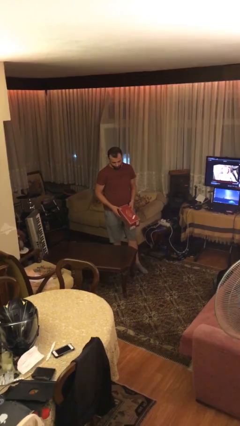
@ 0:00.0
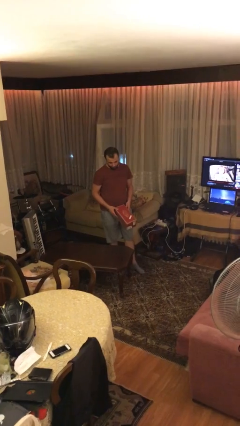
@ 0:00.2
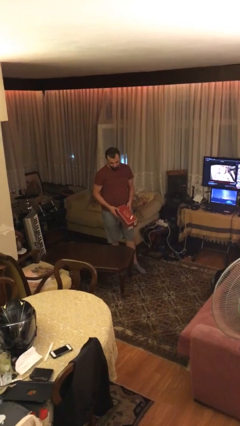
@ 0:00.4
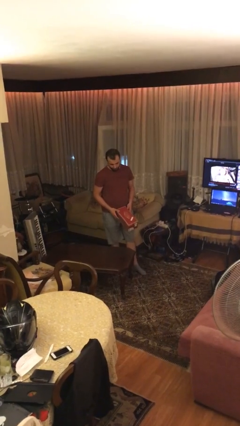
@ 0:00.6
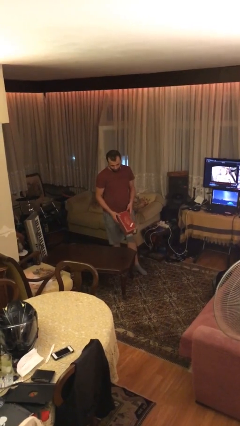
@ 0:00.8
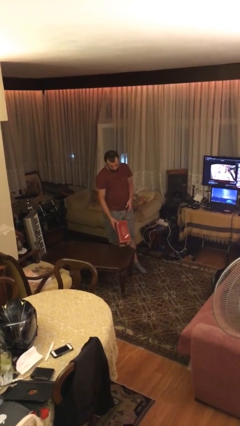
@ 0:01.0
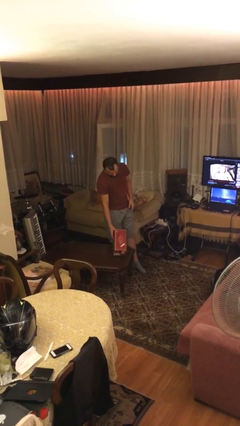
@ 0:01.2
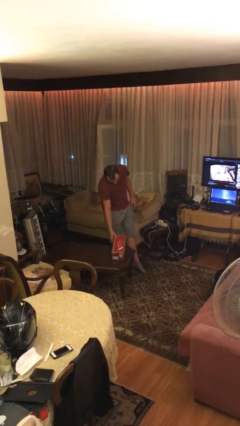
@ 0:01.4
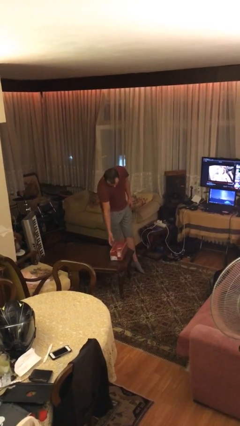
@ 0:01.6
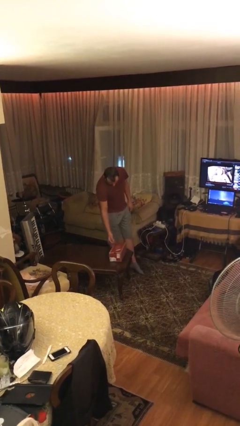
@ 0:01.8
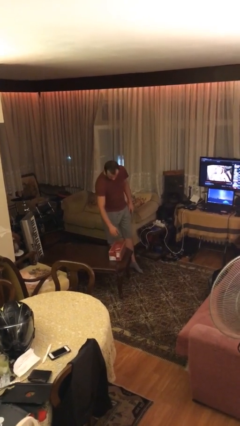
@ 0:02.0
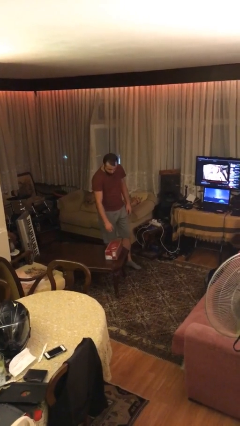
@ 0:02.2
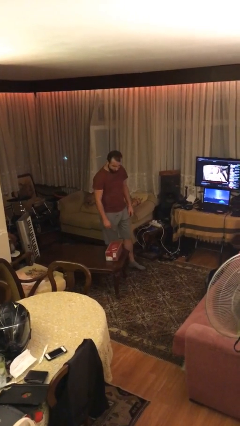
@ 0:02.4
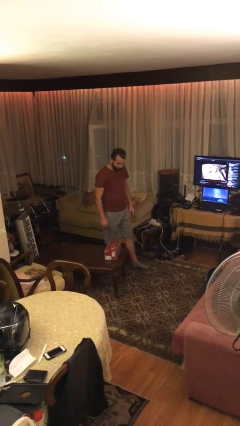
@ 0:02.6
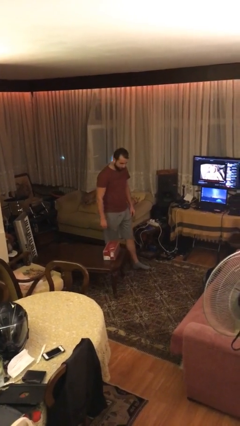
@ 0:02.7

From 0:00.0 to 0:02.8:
person puts down object on table

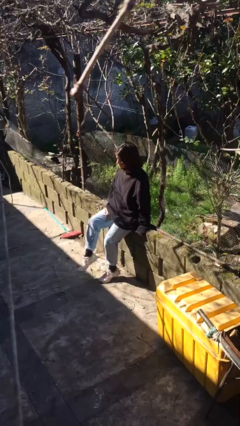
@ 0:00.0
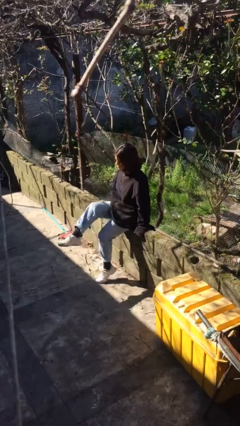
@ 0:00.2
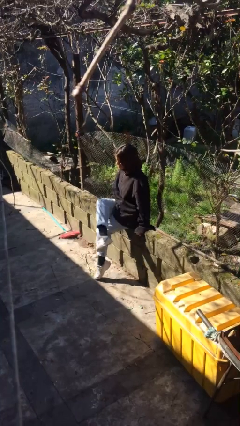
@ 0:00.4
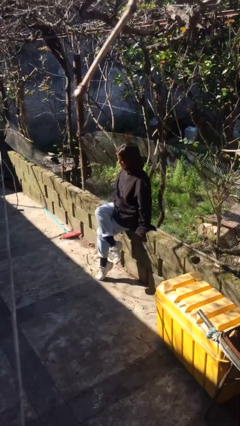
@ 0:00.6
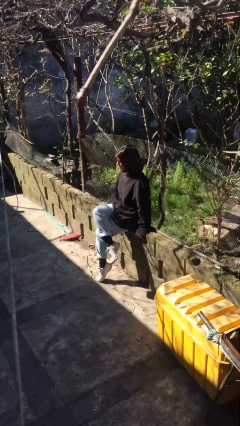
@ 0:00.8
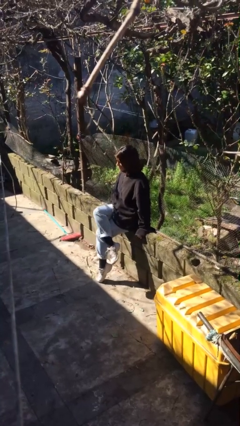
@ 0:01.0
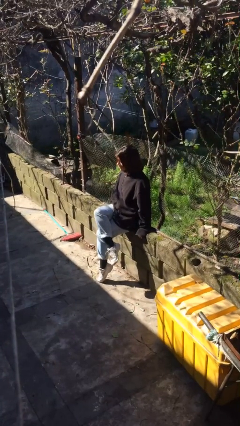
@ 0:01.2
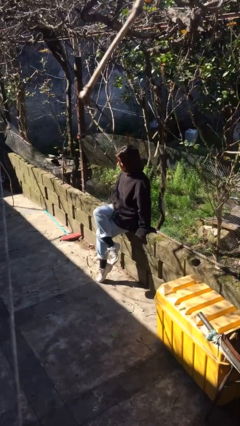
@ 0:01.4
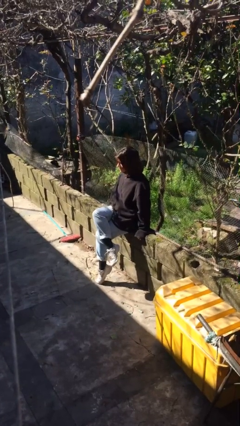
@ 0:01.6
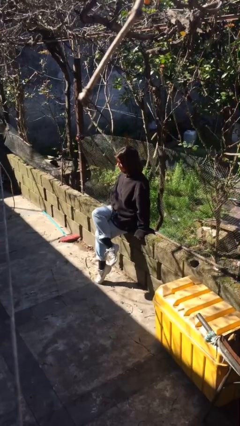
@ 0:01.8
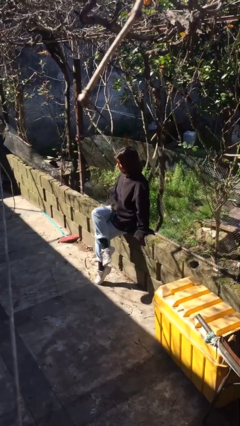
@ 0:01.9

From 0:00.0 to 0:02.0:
person crosses legs

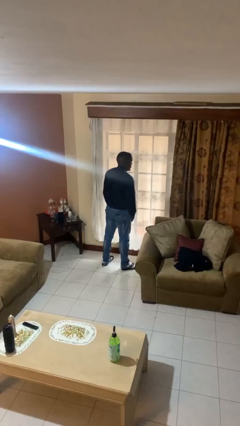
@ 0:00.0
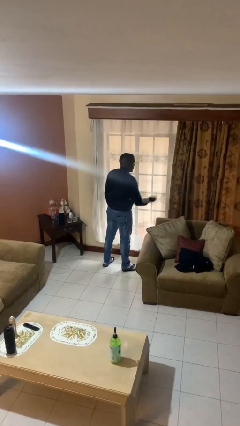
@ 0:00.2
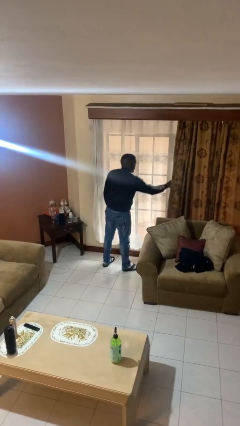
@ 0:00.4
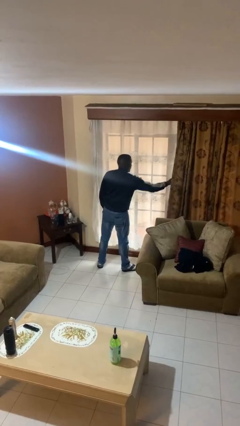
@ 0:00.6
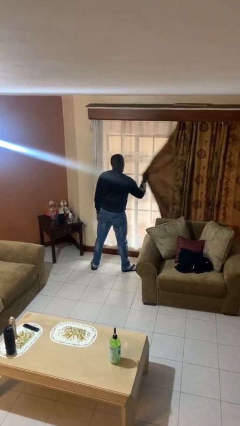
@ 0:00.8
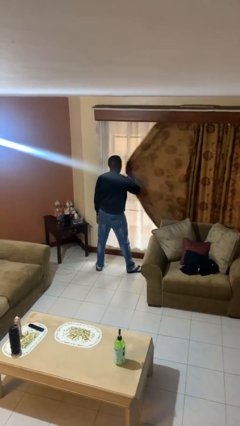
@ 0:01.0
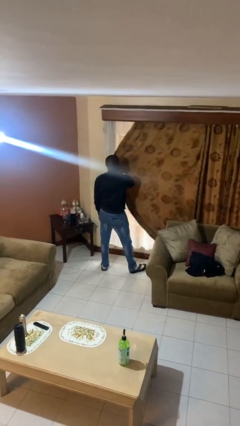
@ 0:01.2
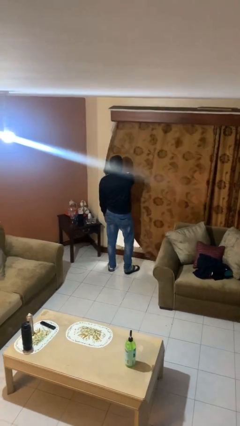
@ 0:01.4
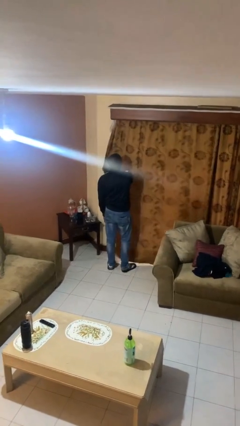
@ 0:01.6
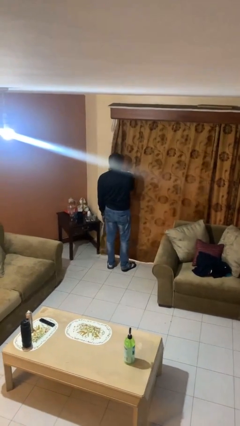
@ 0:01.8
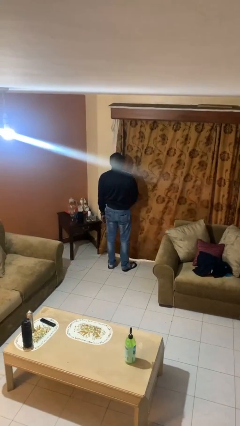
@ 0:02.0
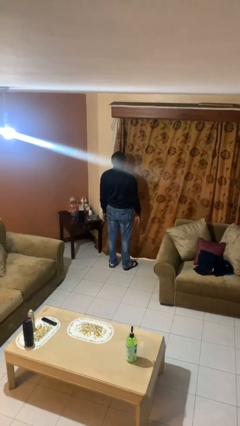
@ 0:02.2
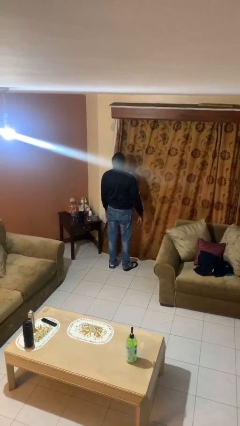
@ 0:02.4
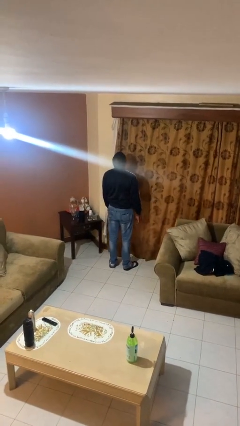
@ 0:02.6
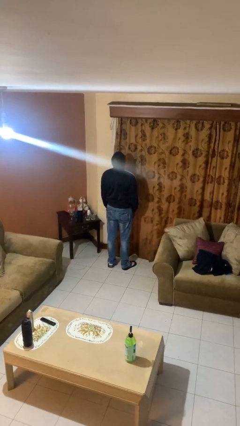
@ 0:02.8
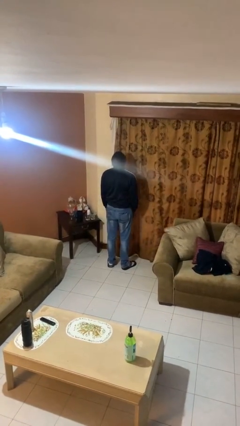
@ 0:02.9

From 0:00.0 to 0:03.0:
person closes curtains

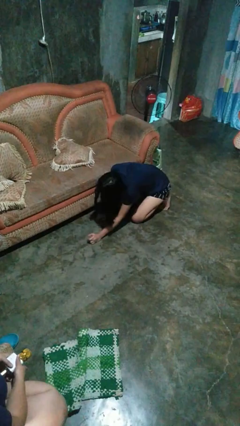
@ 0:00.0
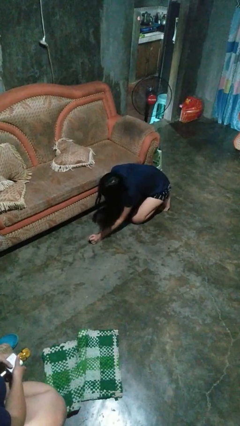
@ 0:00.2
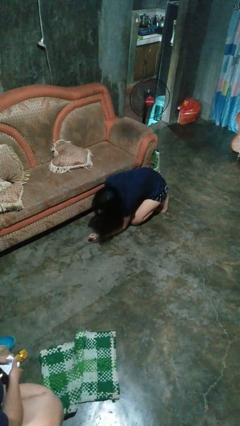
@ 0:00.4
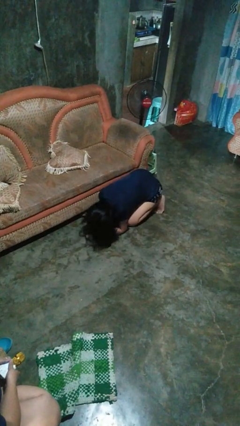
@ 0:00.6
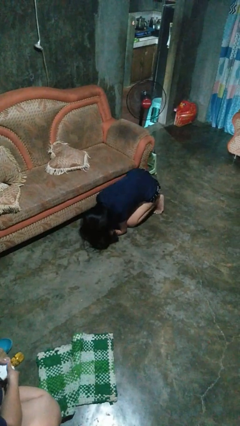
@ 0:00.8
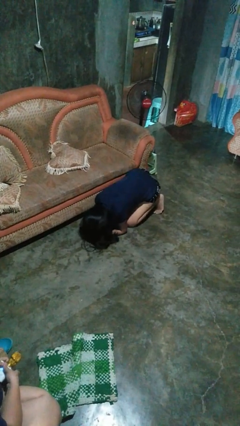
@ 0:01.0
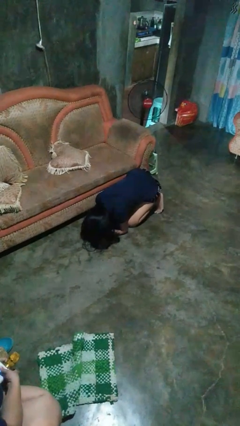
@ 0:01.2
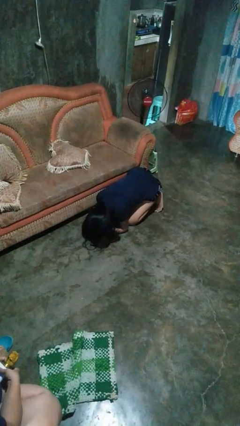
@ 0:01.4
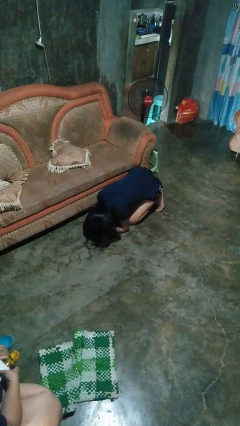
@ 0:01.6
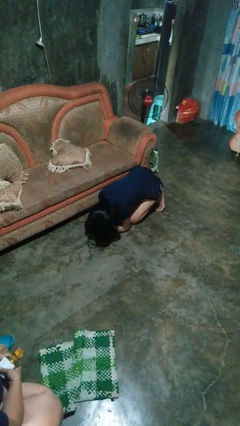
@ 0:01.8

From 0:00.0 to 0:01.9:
person searches in couch

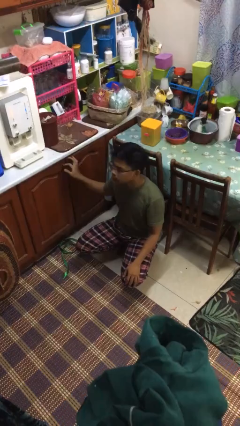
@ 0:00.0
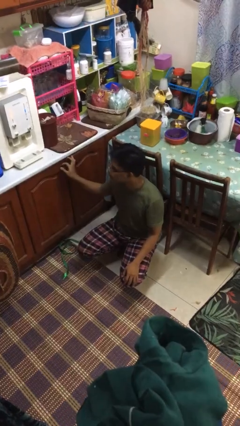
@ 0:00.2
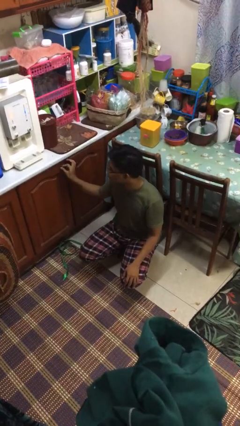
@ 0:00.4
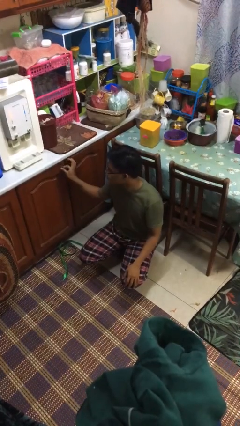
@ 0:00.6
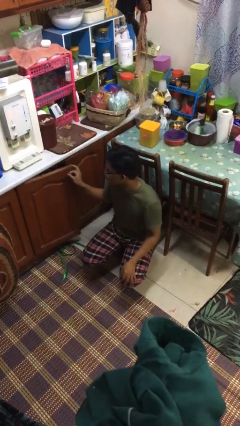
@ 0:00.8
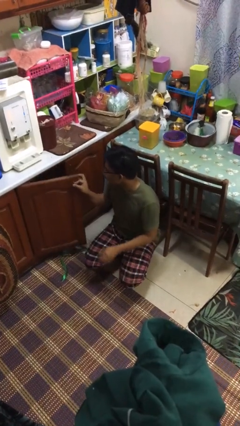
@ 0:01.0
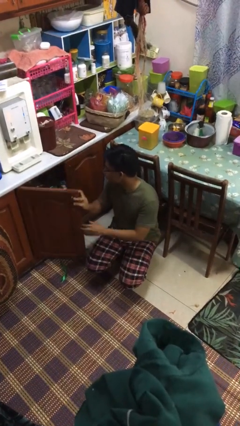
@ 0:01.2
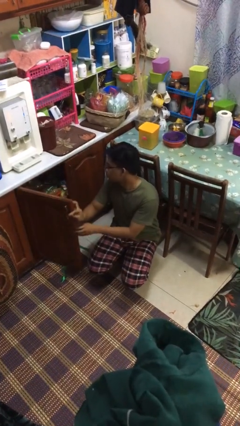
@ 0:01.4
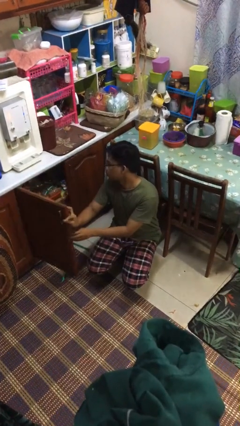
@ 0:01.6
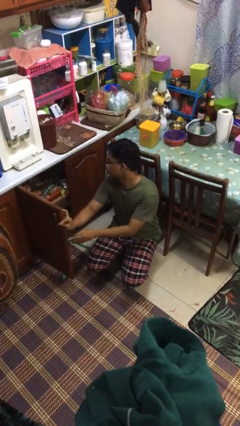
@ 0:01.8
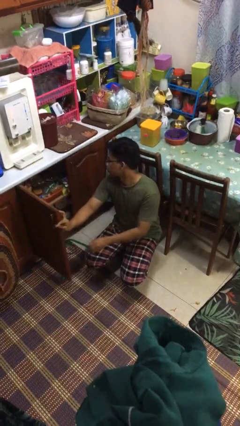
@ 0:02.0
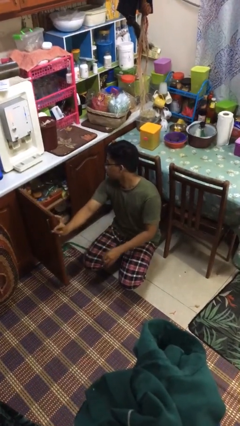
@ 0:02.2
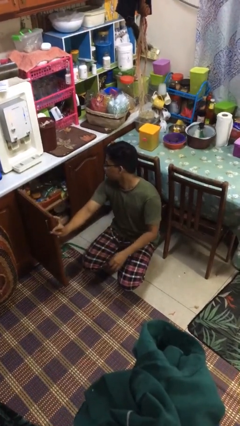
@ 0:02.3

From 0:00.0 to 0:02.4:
person opens kitchen drawer

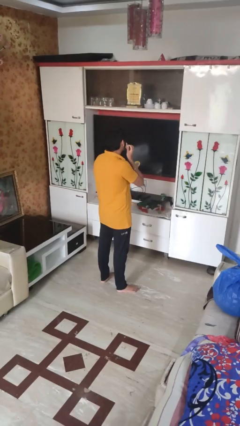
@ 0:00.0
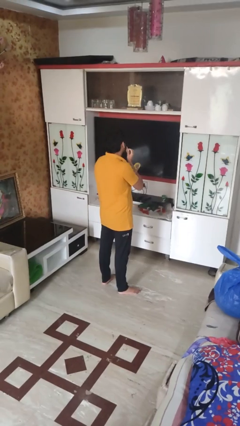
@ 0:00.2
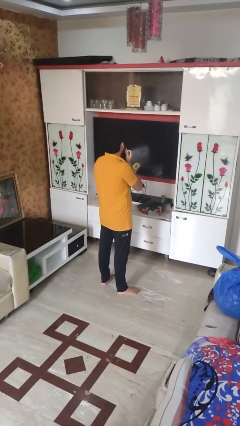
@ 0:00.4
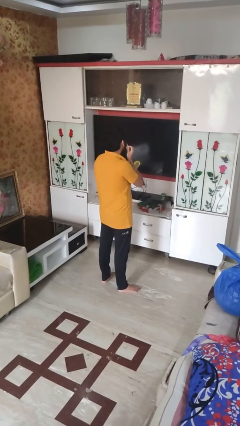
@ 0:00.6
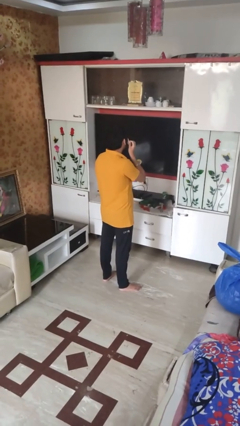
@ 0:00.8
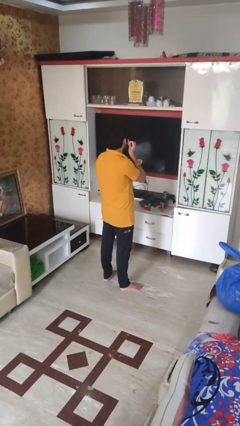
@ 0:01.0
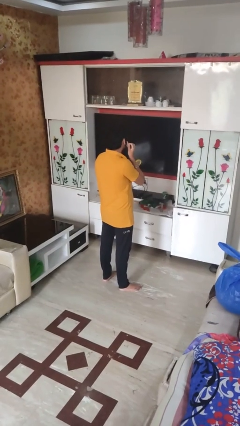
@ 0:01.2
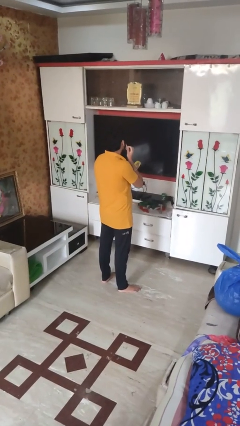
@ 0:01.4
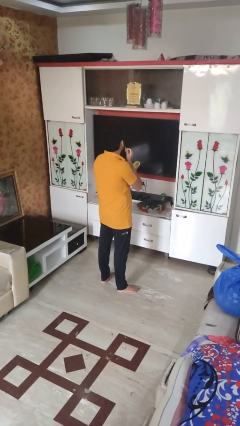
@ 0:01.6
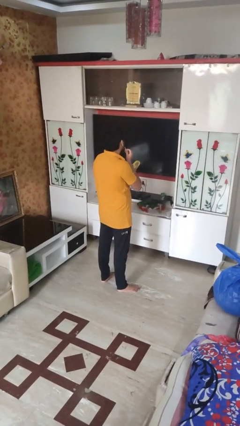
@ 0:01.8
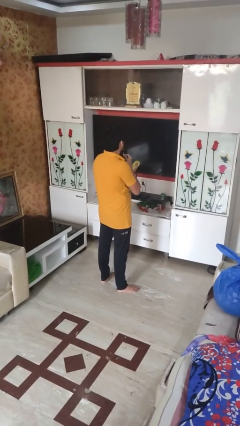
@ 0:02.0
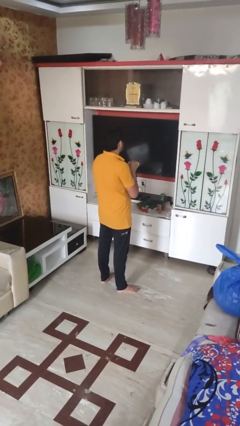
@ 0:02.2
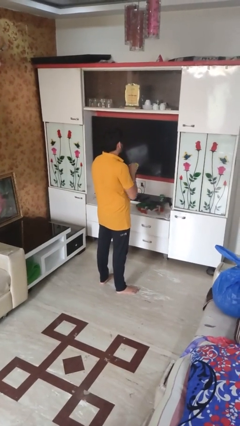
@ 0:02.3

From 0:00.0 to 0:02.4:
person applies foundation makeup

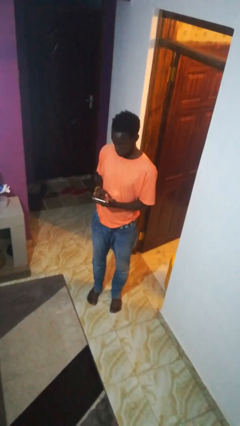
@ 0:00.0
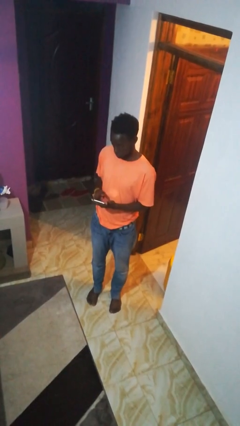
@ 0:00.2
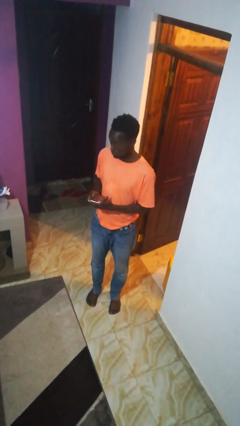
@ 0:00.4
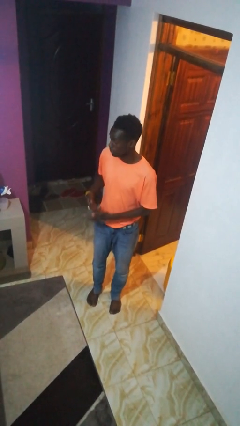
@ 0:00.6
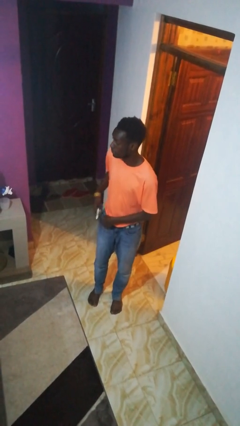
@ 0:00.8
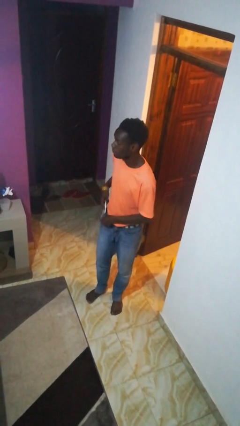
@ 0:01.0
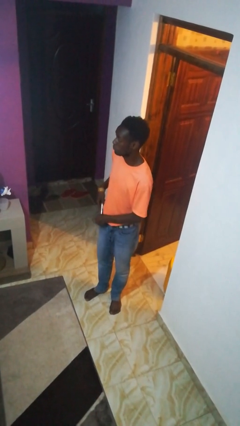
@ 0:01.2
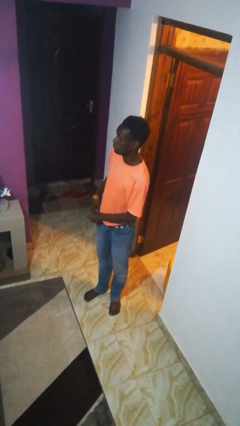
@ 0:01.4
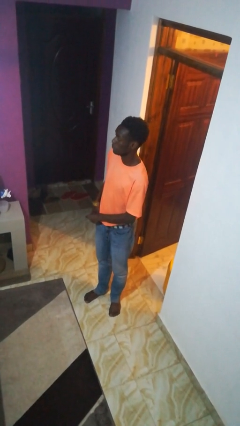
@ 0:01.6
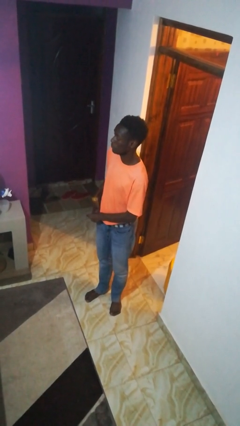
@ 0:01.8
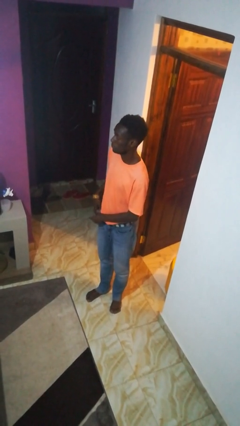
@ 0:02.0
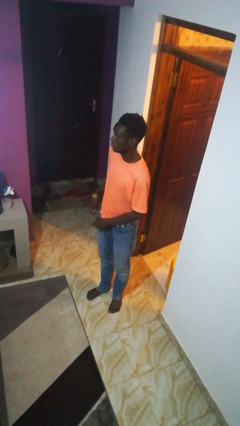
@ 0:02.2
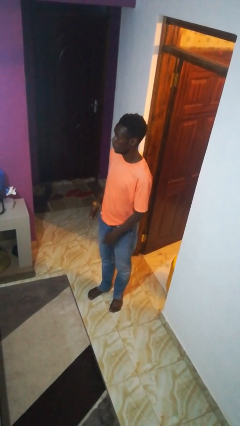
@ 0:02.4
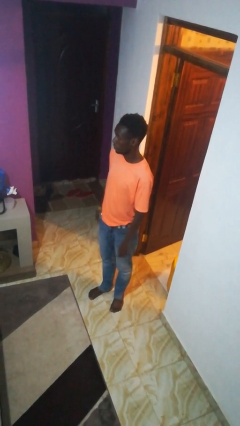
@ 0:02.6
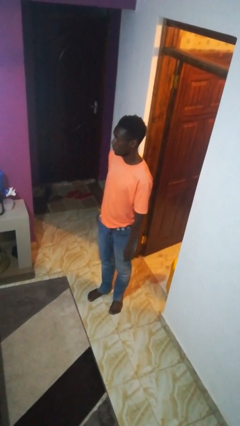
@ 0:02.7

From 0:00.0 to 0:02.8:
person puts phone into pocket
